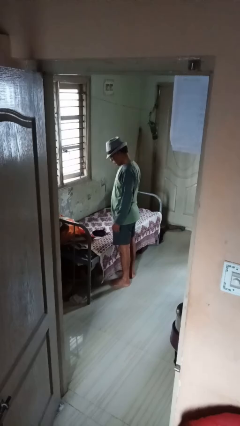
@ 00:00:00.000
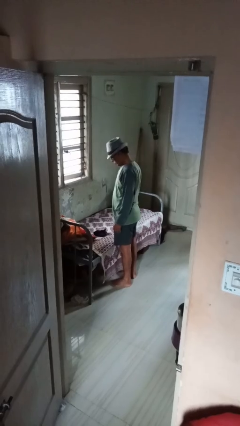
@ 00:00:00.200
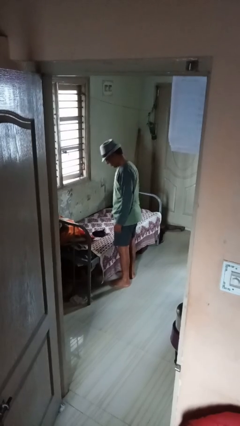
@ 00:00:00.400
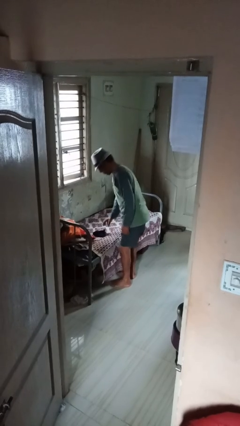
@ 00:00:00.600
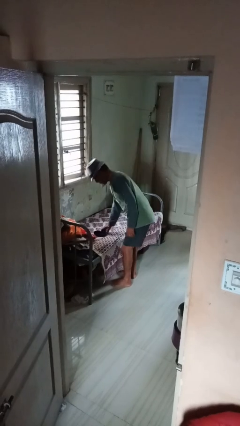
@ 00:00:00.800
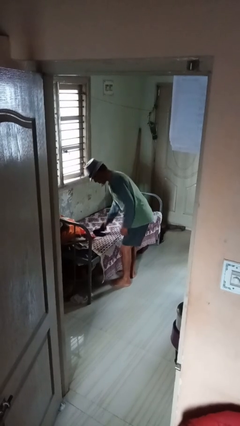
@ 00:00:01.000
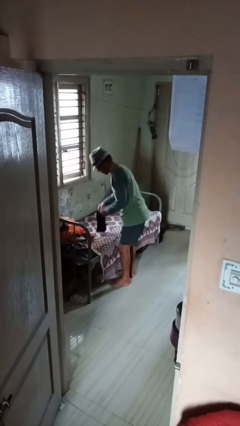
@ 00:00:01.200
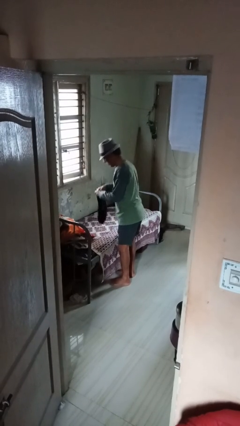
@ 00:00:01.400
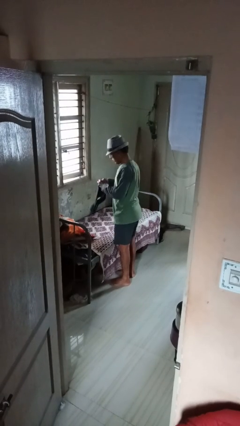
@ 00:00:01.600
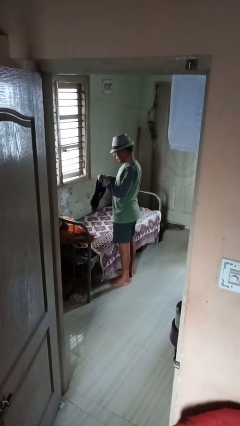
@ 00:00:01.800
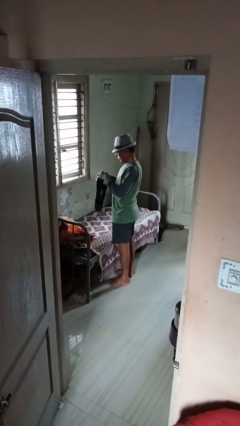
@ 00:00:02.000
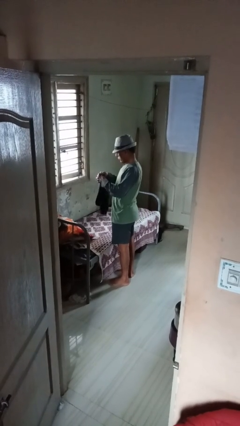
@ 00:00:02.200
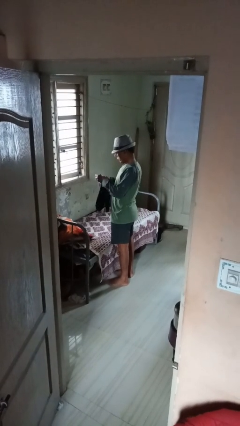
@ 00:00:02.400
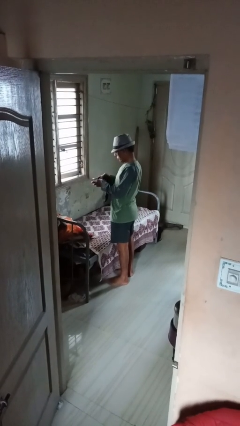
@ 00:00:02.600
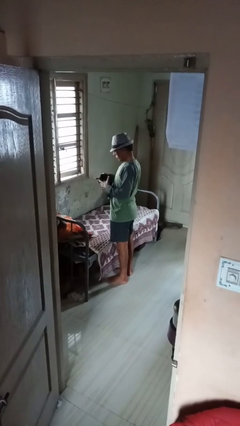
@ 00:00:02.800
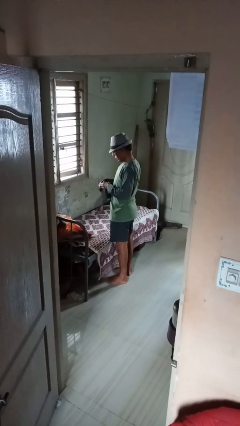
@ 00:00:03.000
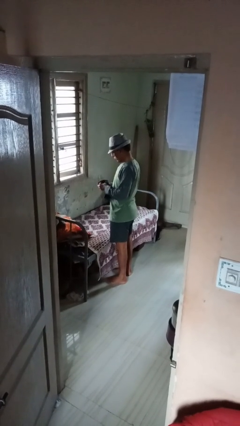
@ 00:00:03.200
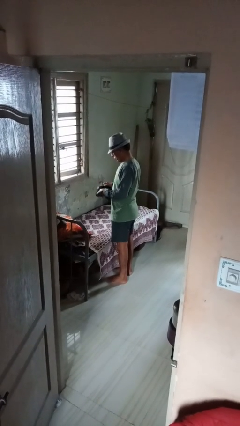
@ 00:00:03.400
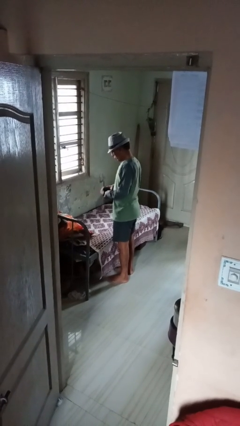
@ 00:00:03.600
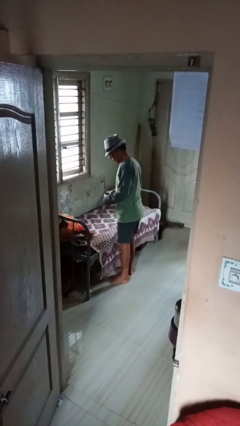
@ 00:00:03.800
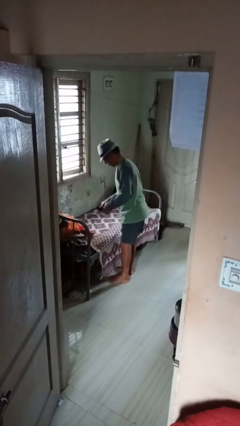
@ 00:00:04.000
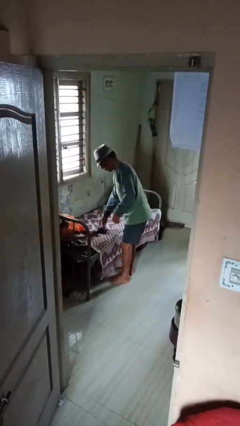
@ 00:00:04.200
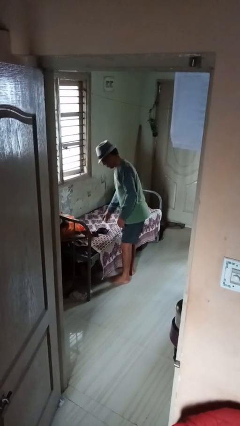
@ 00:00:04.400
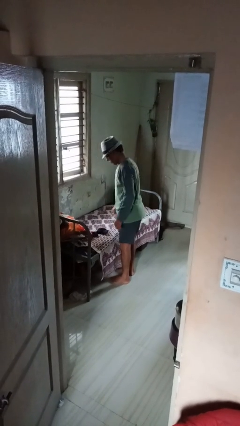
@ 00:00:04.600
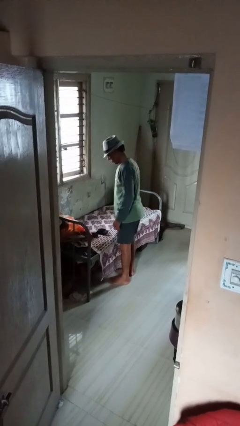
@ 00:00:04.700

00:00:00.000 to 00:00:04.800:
person folds socks

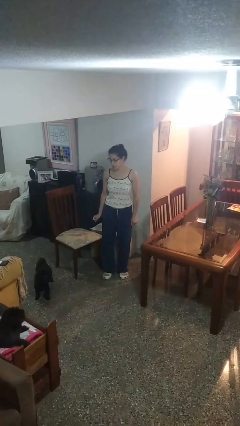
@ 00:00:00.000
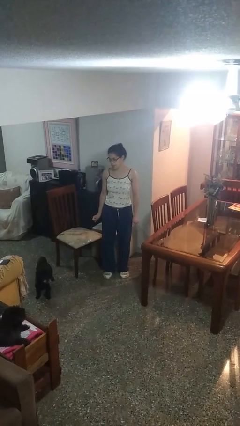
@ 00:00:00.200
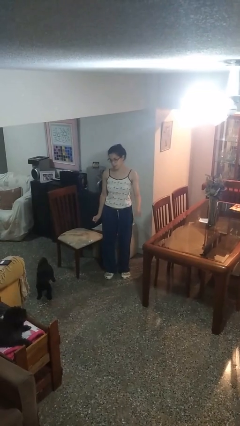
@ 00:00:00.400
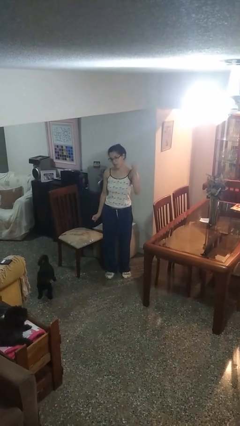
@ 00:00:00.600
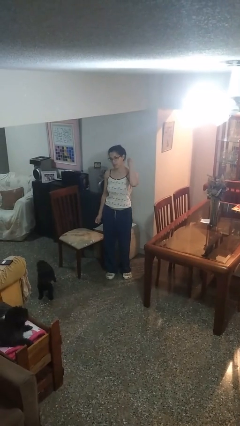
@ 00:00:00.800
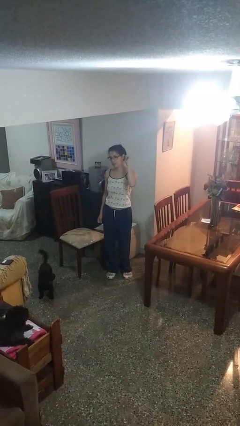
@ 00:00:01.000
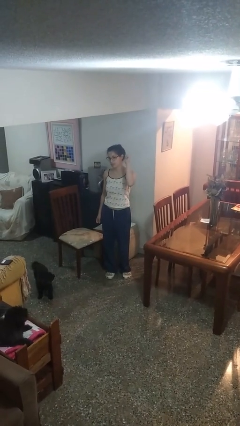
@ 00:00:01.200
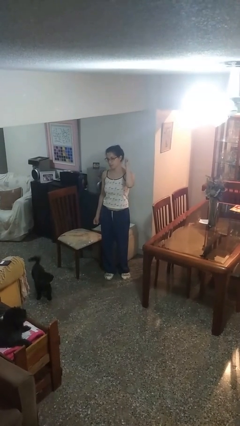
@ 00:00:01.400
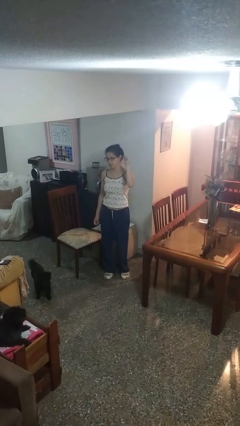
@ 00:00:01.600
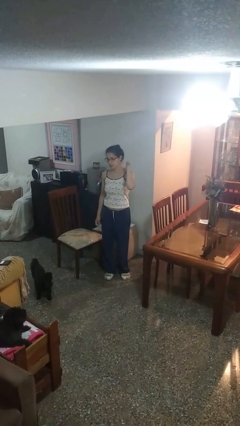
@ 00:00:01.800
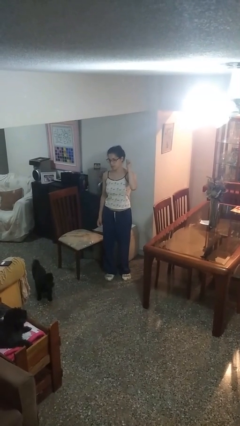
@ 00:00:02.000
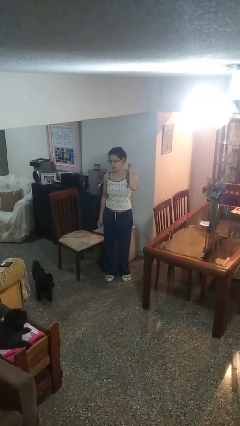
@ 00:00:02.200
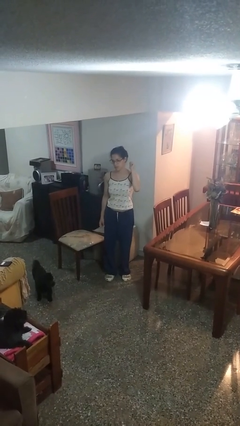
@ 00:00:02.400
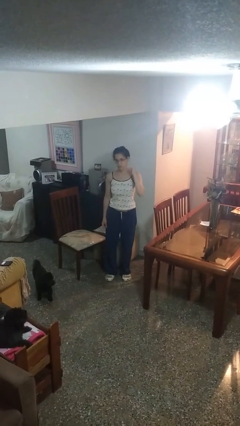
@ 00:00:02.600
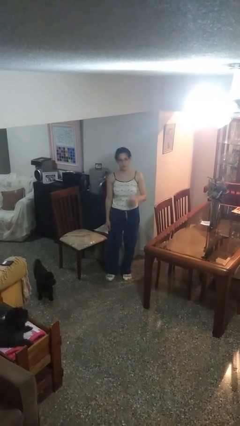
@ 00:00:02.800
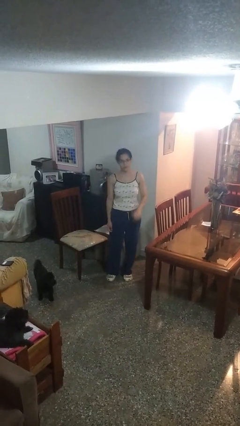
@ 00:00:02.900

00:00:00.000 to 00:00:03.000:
person gestures behind me

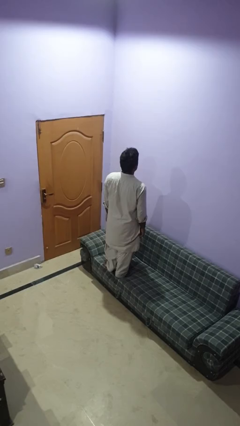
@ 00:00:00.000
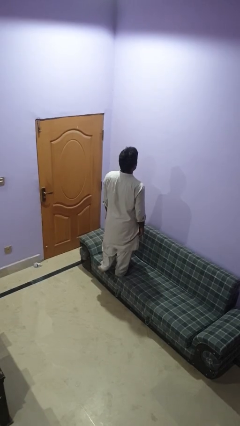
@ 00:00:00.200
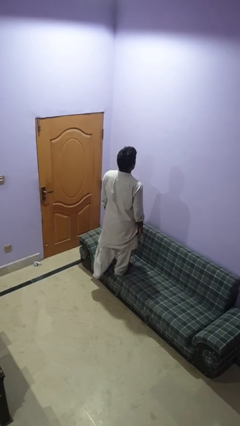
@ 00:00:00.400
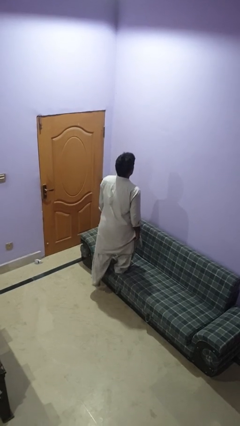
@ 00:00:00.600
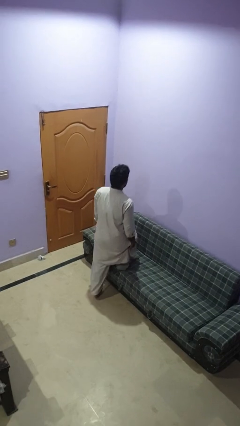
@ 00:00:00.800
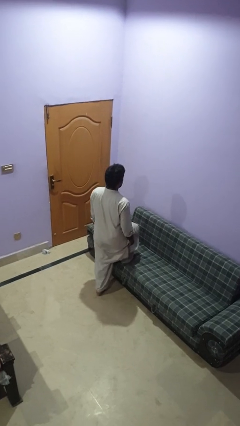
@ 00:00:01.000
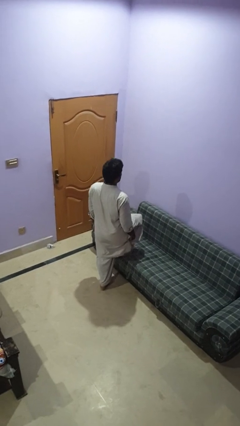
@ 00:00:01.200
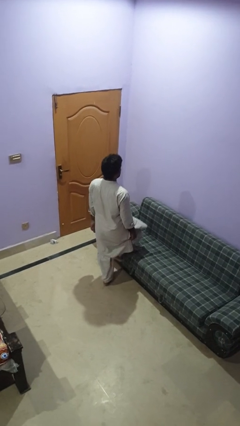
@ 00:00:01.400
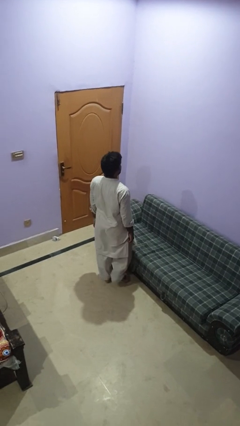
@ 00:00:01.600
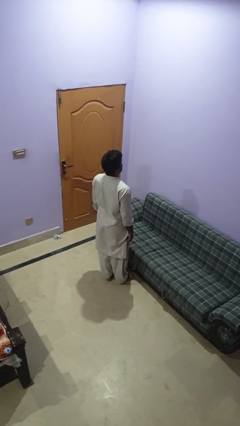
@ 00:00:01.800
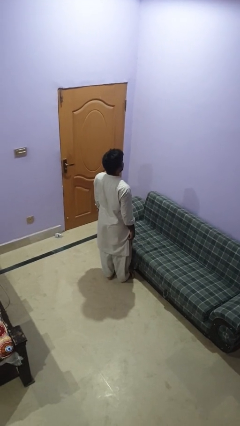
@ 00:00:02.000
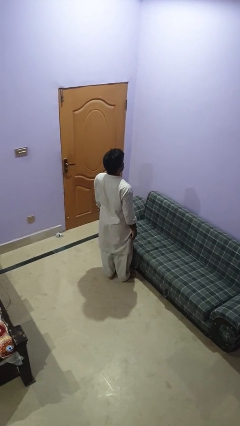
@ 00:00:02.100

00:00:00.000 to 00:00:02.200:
person climbs off couch

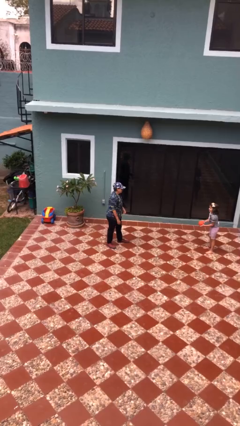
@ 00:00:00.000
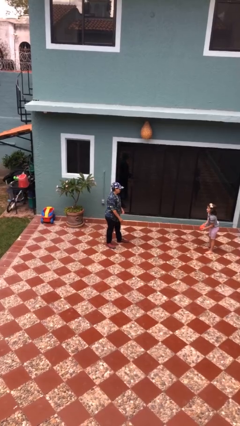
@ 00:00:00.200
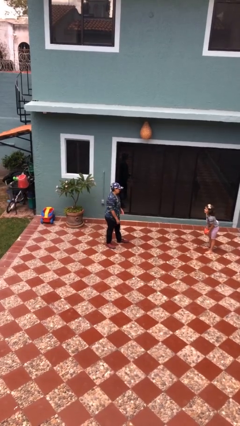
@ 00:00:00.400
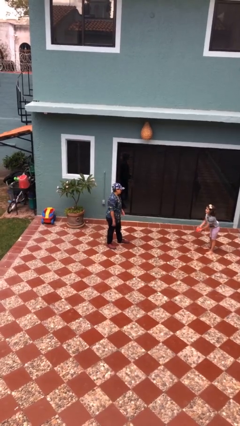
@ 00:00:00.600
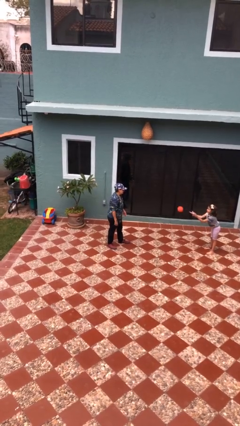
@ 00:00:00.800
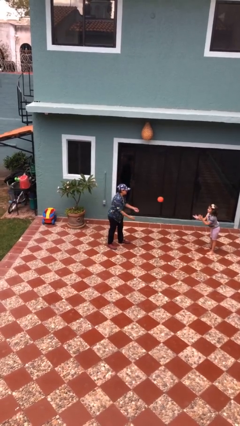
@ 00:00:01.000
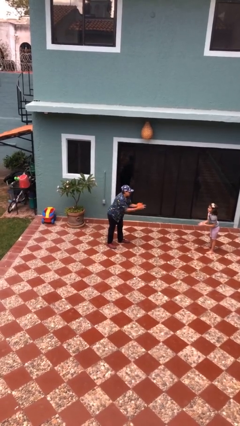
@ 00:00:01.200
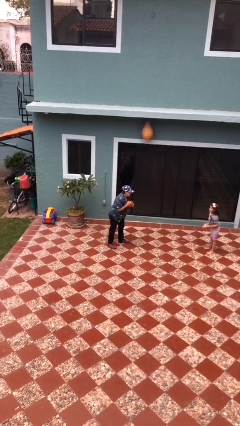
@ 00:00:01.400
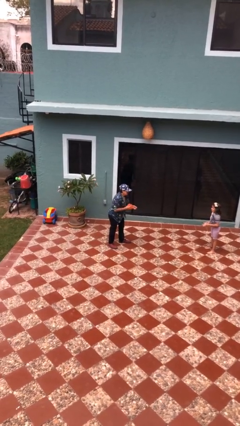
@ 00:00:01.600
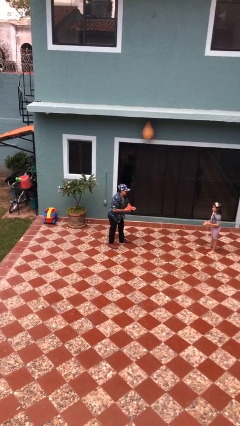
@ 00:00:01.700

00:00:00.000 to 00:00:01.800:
person catches object from person

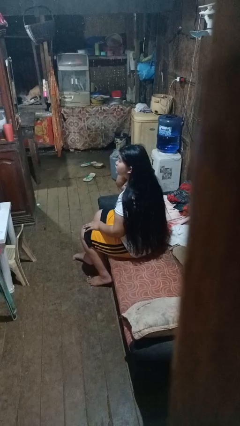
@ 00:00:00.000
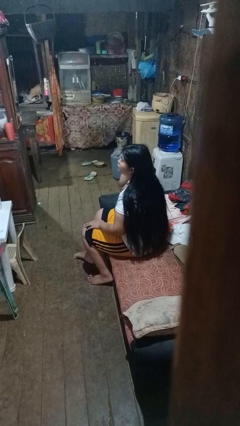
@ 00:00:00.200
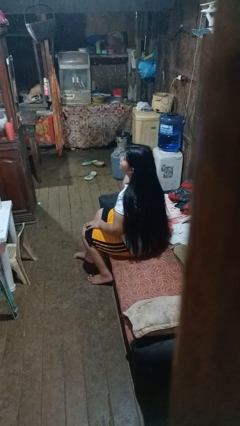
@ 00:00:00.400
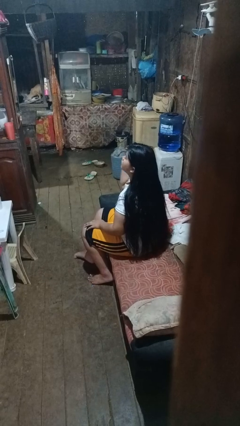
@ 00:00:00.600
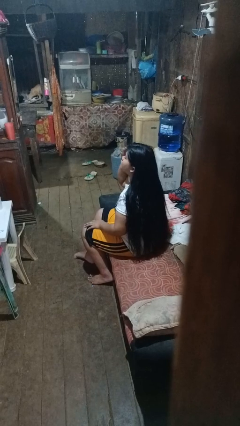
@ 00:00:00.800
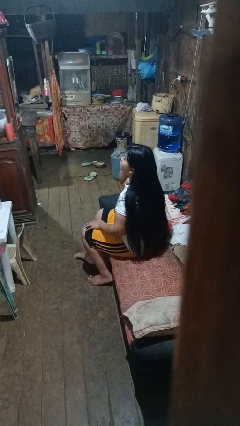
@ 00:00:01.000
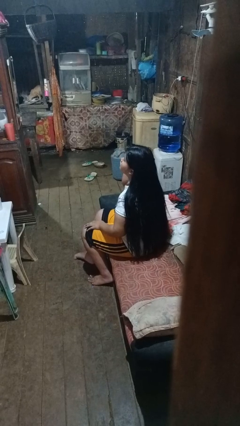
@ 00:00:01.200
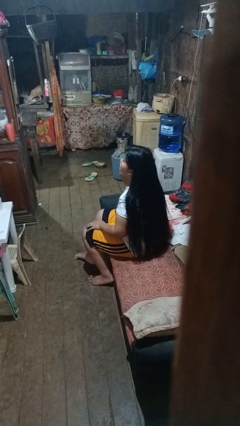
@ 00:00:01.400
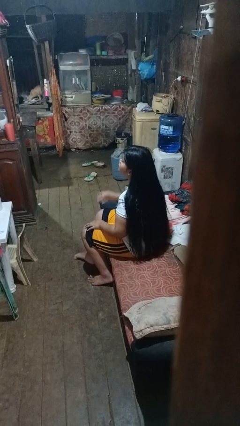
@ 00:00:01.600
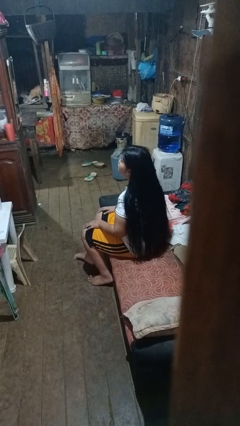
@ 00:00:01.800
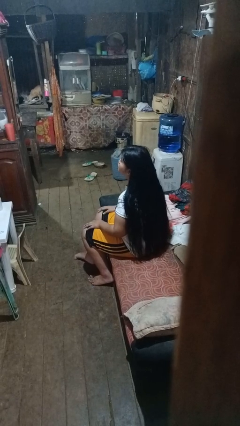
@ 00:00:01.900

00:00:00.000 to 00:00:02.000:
person strokes hair

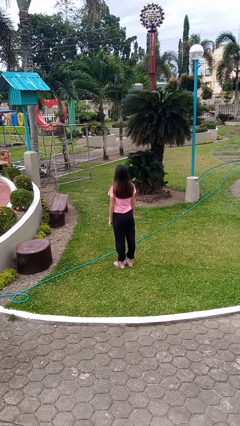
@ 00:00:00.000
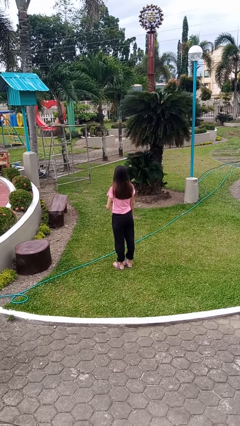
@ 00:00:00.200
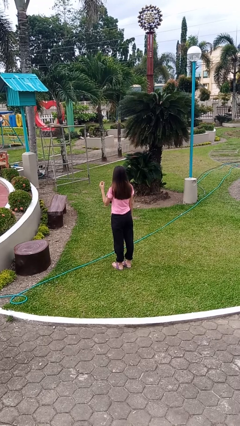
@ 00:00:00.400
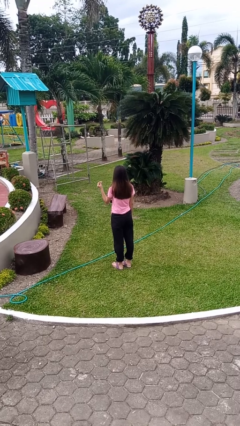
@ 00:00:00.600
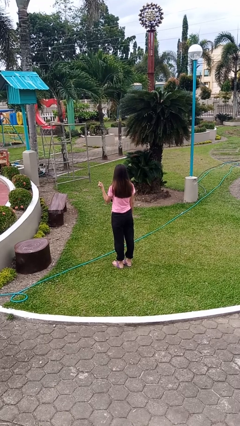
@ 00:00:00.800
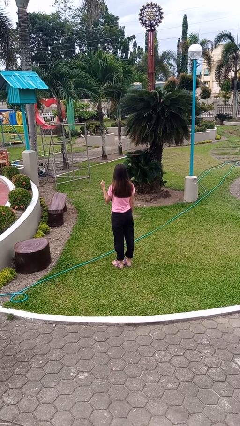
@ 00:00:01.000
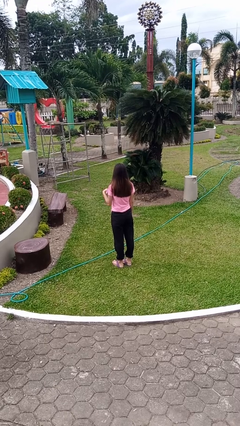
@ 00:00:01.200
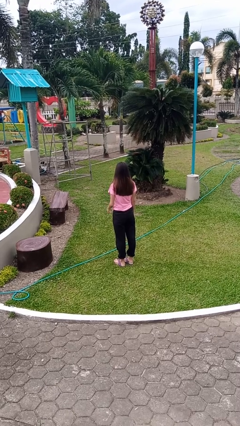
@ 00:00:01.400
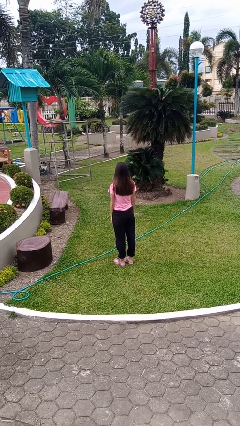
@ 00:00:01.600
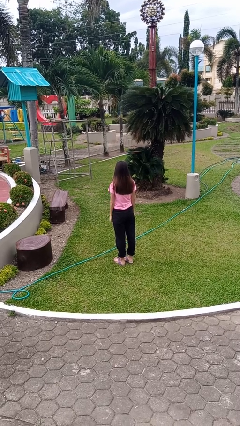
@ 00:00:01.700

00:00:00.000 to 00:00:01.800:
person snaps fingers

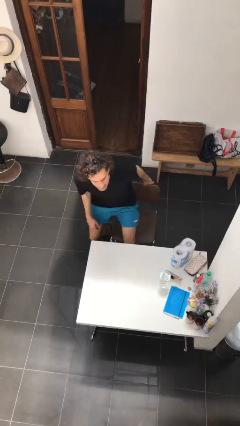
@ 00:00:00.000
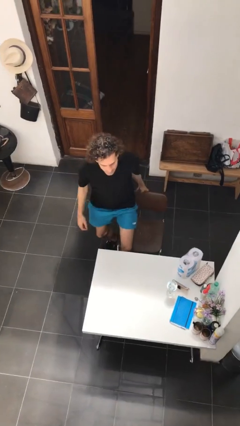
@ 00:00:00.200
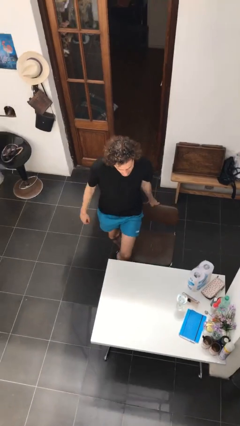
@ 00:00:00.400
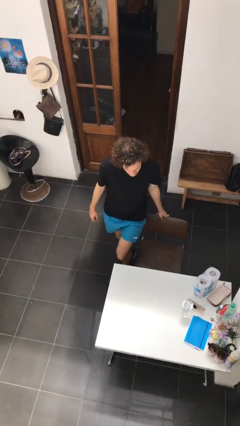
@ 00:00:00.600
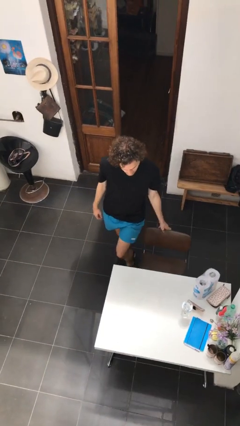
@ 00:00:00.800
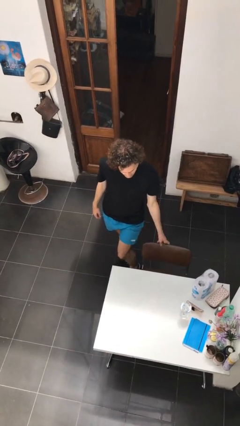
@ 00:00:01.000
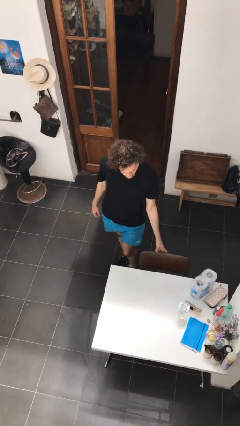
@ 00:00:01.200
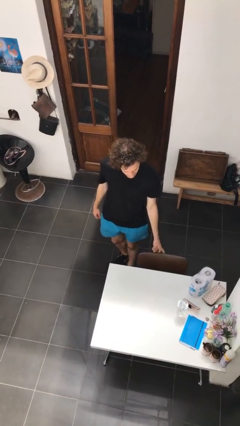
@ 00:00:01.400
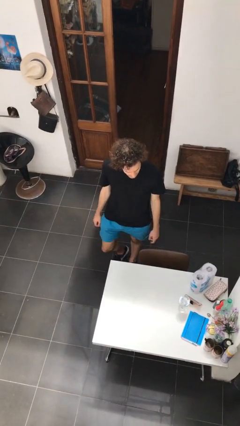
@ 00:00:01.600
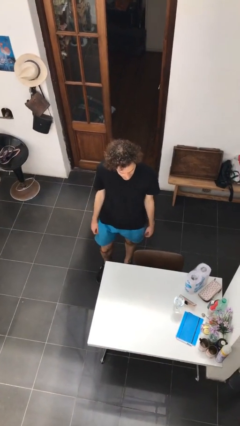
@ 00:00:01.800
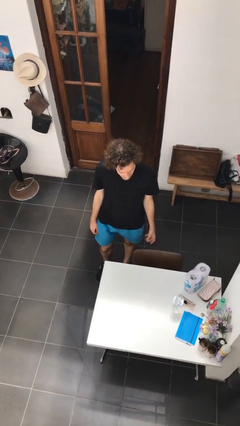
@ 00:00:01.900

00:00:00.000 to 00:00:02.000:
person stands up
